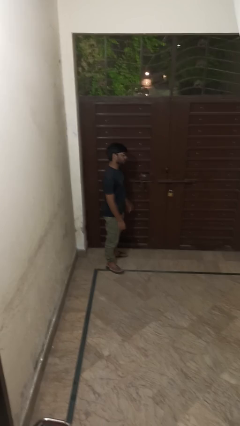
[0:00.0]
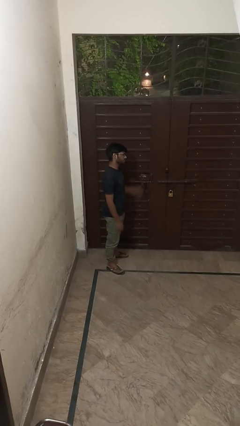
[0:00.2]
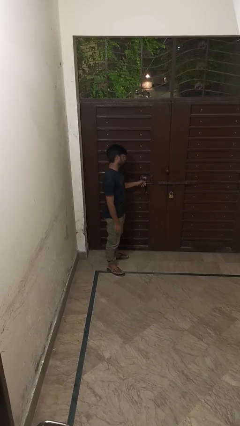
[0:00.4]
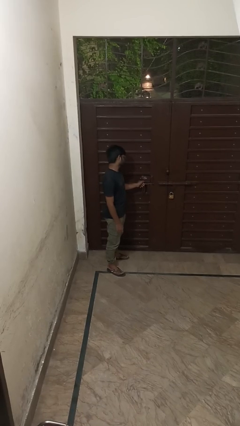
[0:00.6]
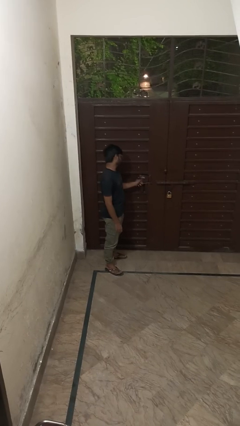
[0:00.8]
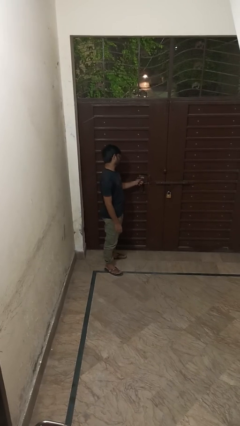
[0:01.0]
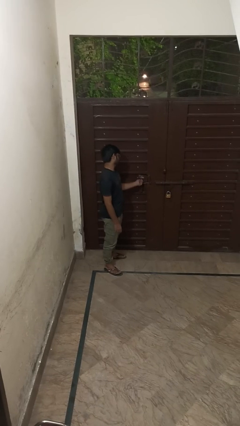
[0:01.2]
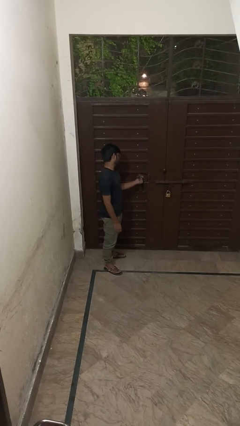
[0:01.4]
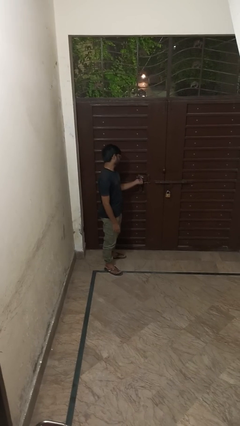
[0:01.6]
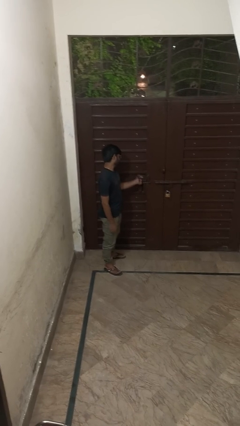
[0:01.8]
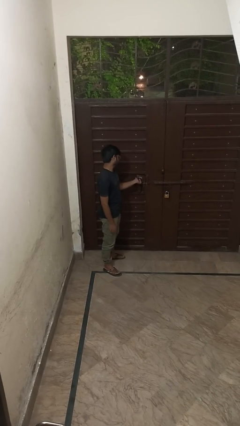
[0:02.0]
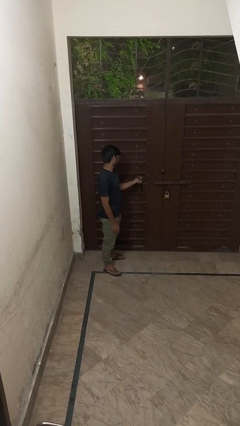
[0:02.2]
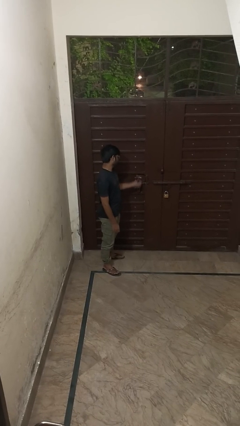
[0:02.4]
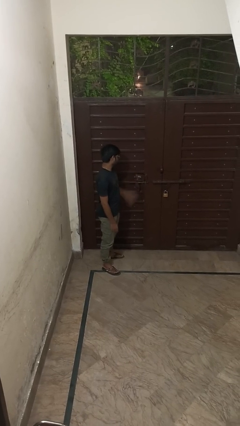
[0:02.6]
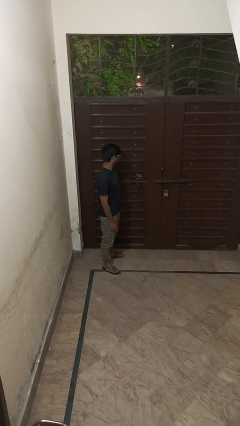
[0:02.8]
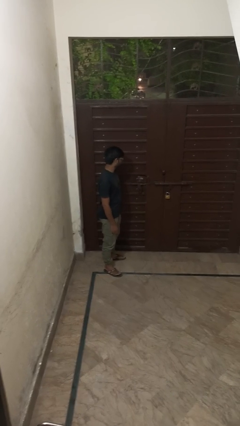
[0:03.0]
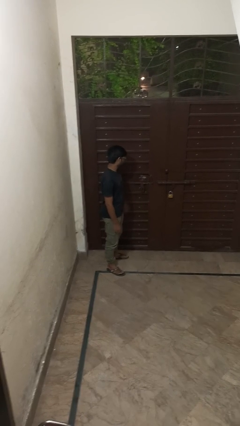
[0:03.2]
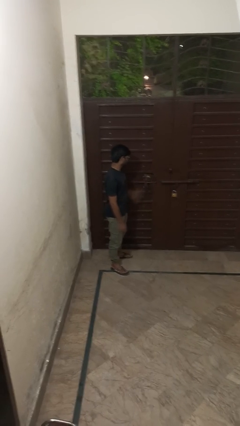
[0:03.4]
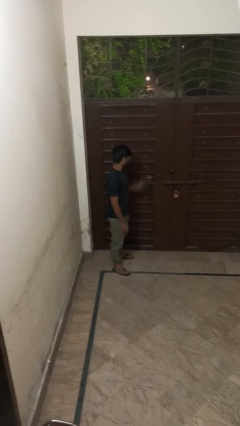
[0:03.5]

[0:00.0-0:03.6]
person unlocks door with keys

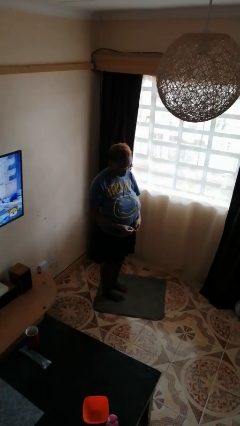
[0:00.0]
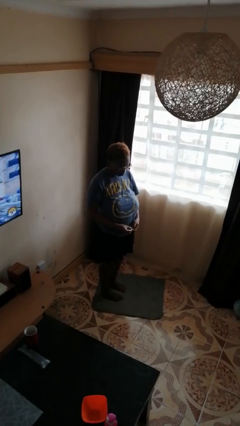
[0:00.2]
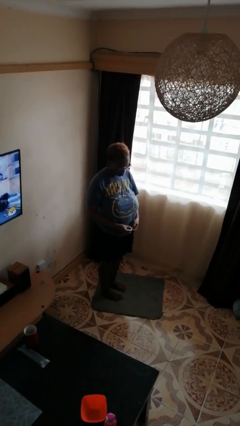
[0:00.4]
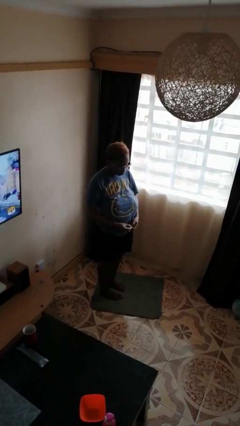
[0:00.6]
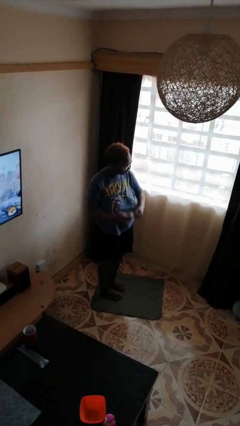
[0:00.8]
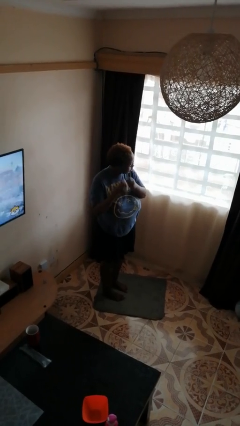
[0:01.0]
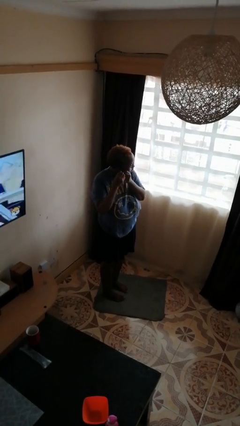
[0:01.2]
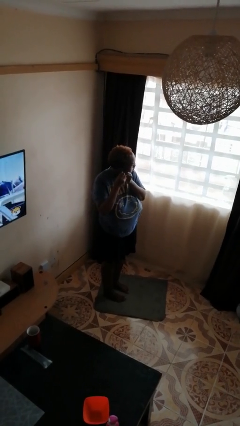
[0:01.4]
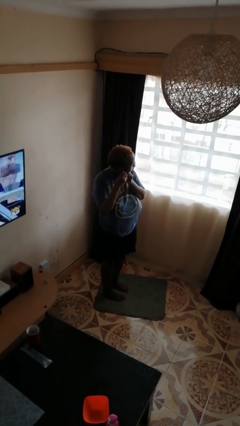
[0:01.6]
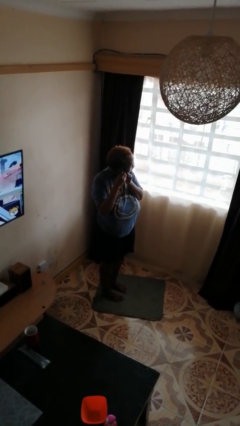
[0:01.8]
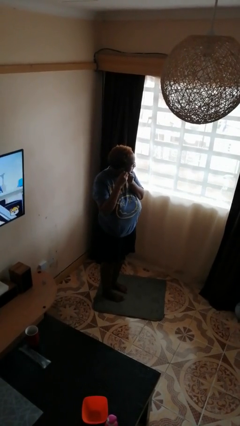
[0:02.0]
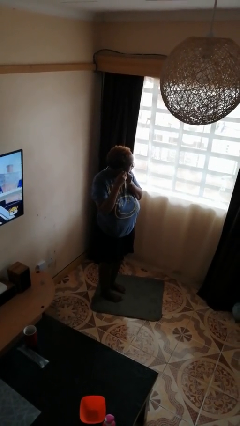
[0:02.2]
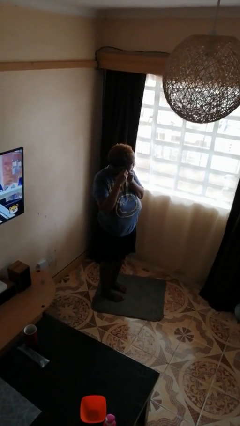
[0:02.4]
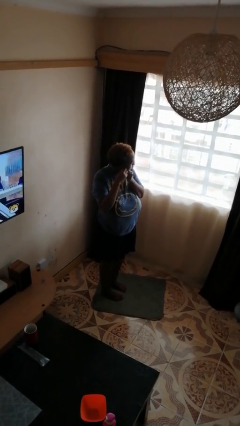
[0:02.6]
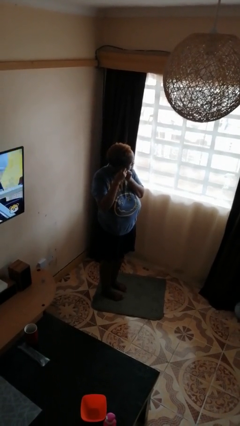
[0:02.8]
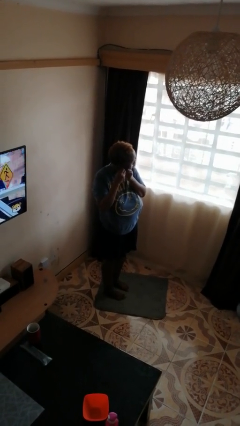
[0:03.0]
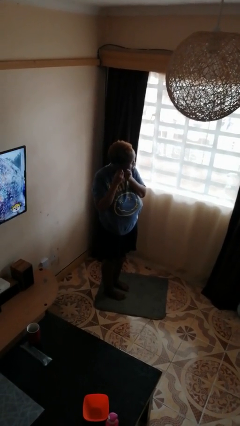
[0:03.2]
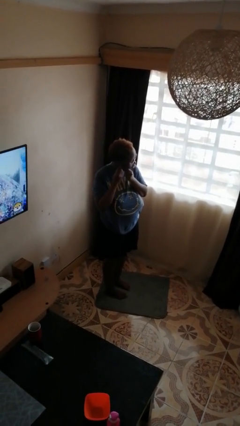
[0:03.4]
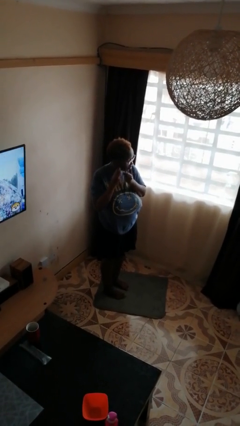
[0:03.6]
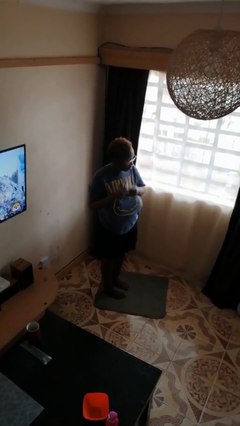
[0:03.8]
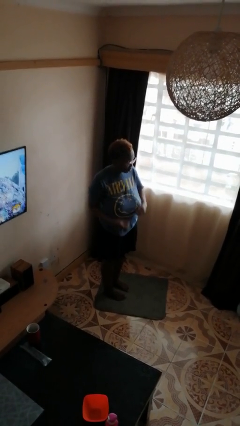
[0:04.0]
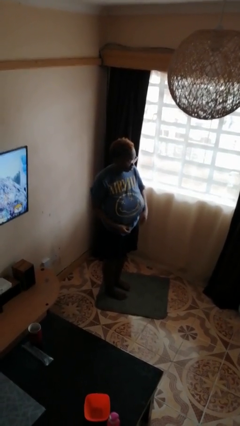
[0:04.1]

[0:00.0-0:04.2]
person puts on earrings

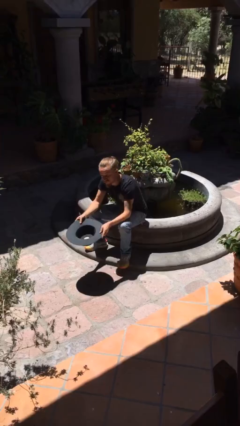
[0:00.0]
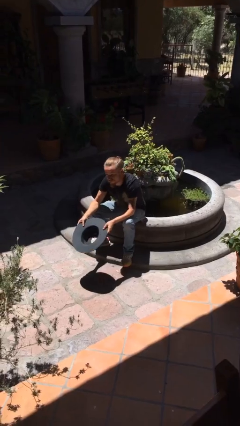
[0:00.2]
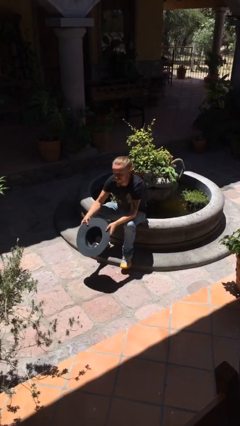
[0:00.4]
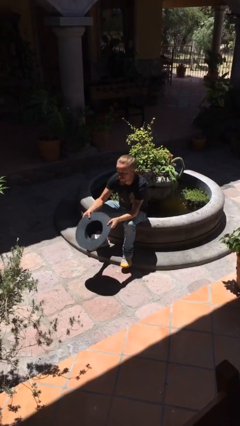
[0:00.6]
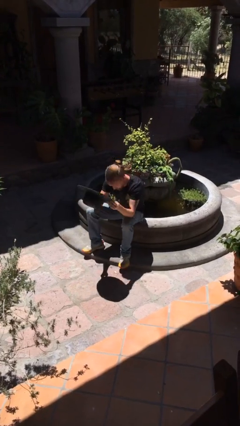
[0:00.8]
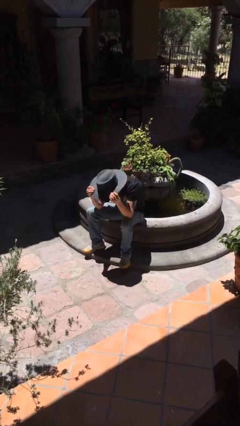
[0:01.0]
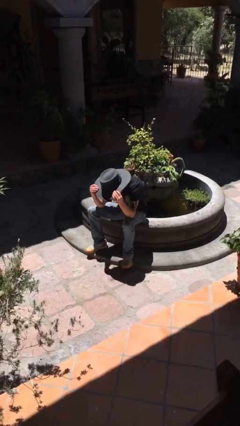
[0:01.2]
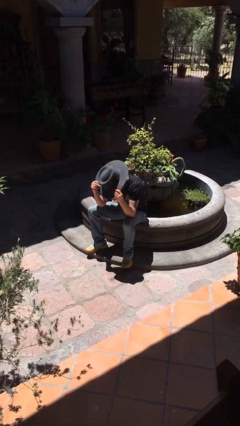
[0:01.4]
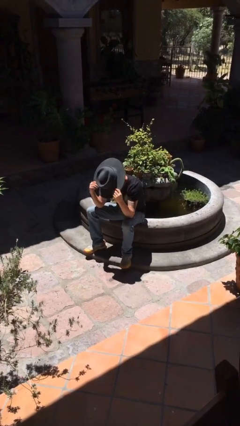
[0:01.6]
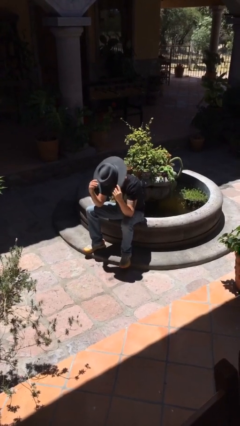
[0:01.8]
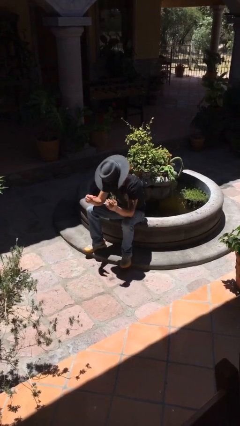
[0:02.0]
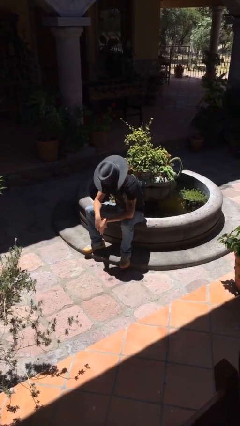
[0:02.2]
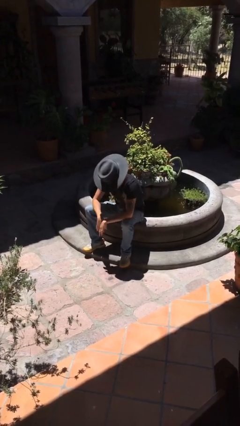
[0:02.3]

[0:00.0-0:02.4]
person puts on hat

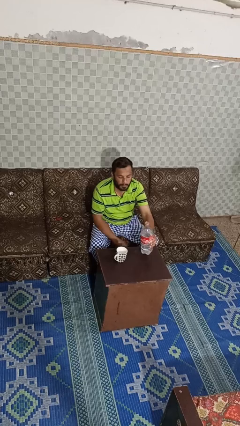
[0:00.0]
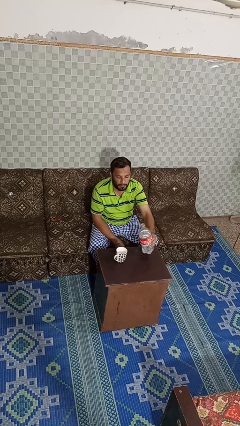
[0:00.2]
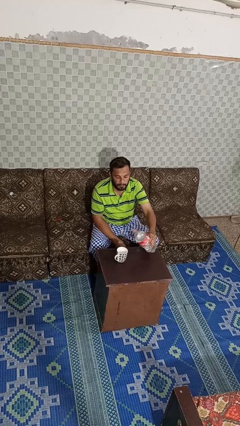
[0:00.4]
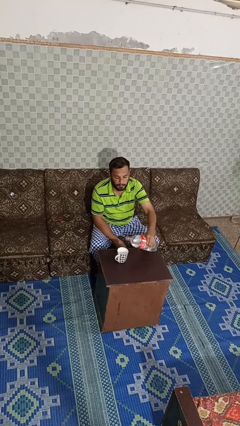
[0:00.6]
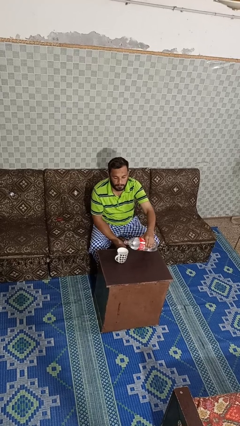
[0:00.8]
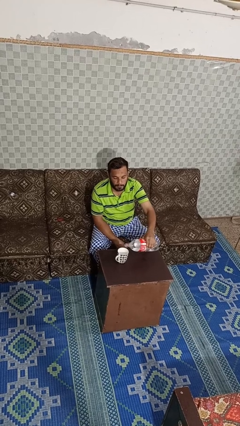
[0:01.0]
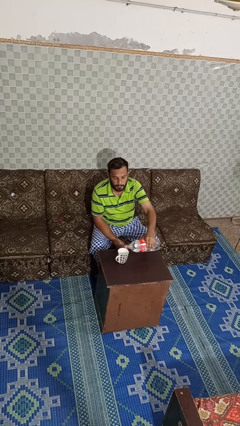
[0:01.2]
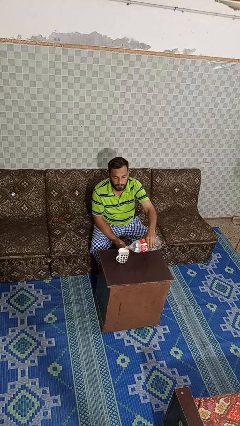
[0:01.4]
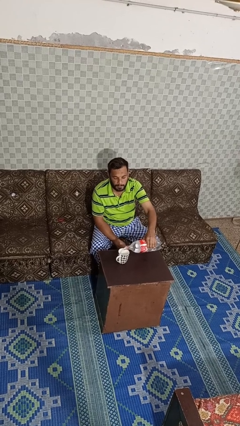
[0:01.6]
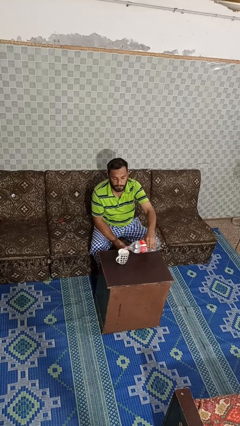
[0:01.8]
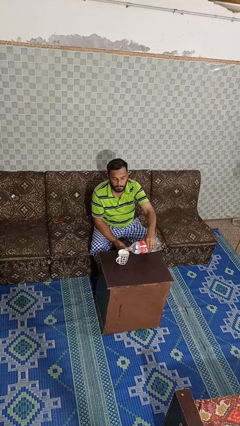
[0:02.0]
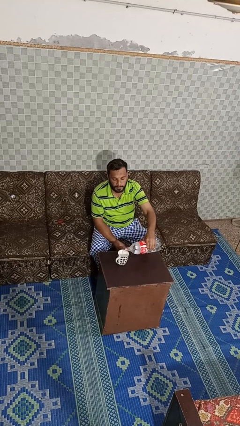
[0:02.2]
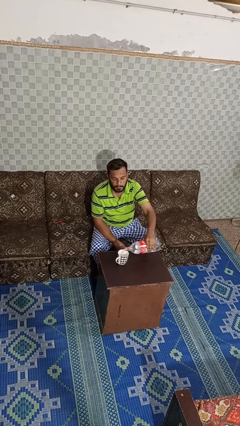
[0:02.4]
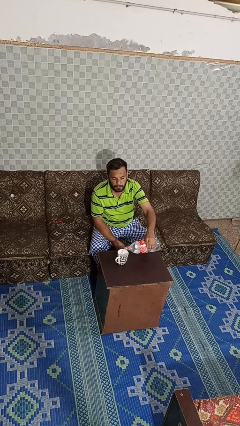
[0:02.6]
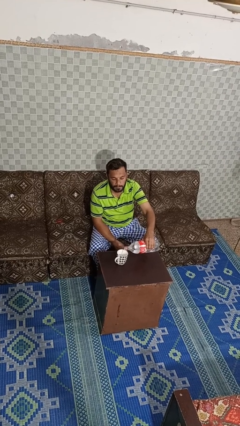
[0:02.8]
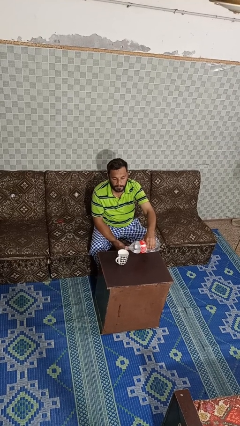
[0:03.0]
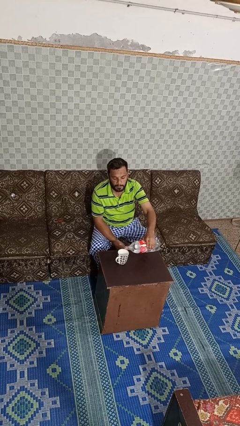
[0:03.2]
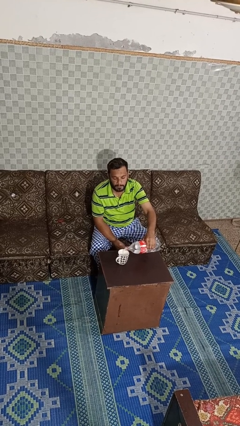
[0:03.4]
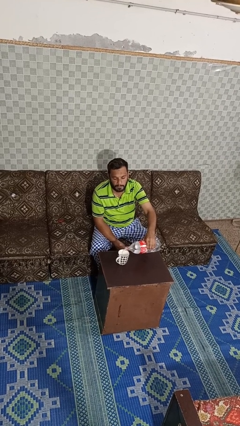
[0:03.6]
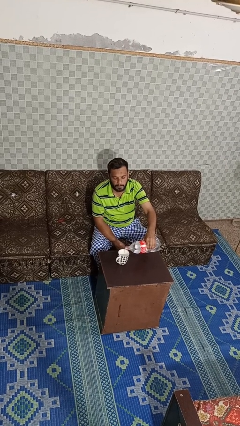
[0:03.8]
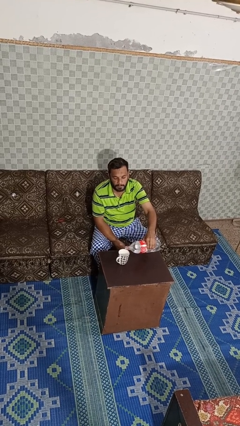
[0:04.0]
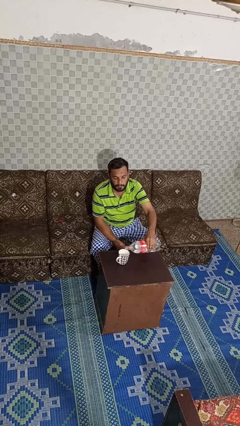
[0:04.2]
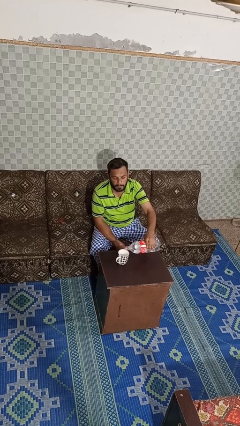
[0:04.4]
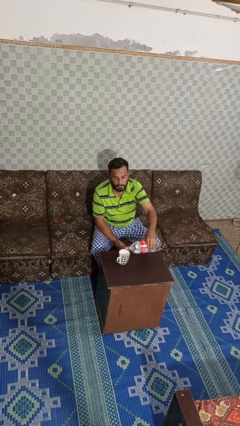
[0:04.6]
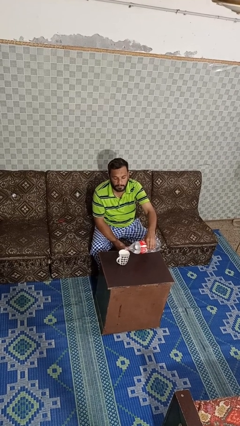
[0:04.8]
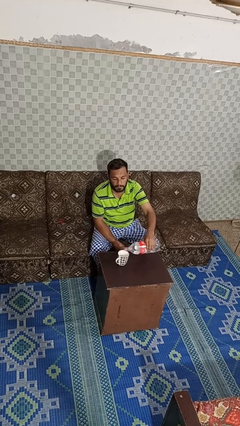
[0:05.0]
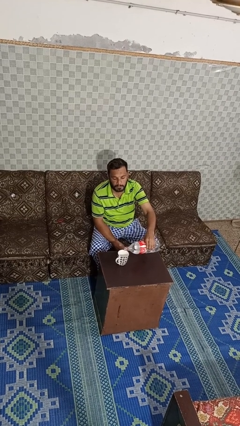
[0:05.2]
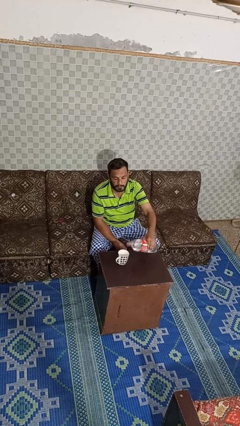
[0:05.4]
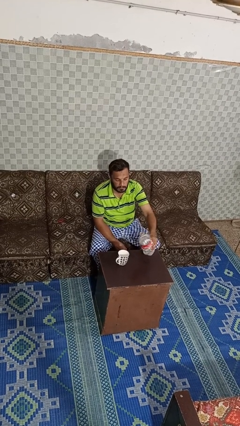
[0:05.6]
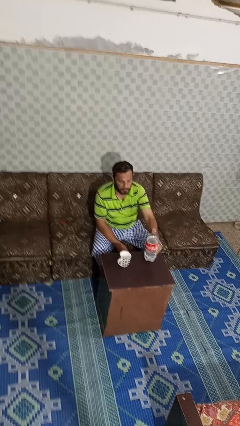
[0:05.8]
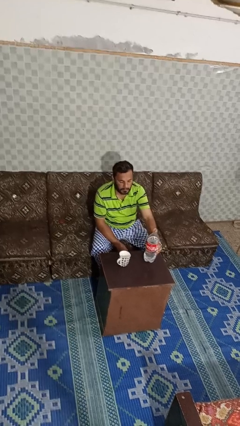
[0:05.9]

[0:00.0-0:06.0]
person pours liquid into cup

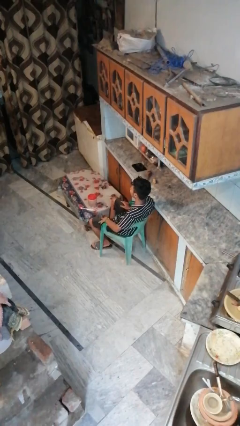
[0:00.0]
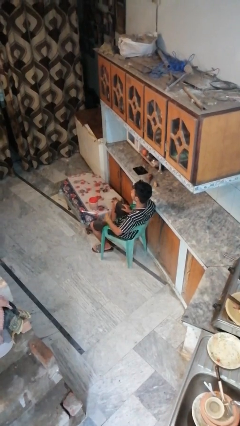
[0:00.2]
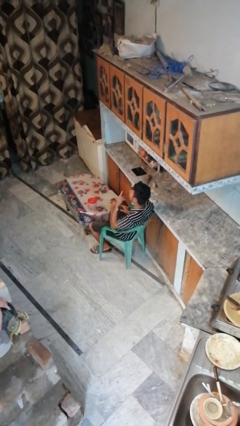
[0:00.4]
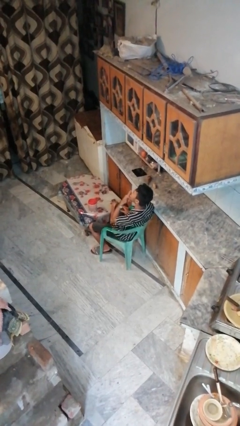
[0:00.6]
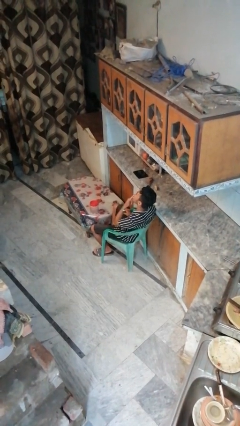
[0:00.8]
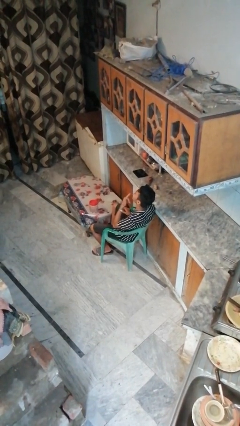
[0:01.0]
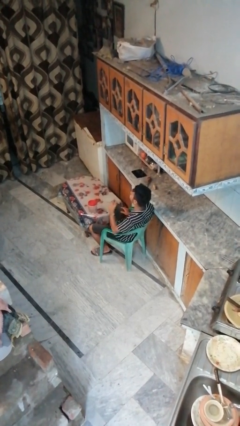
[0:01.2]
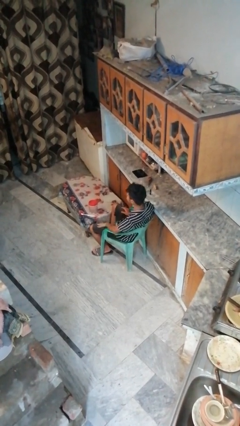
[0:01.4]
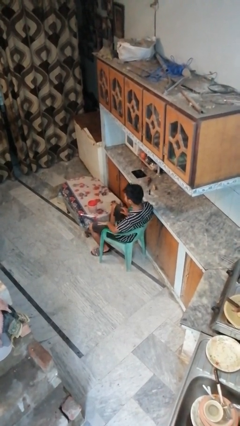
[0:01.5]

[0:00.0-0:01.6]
person licks fingers
